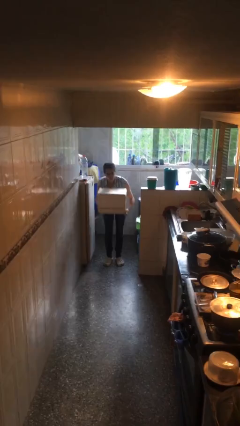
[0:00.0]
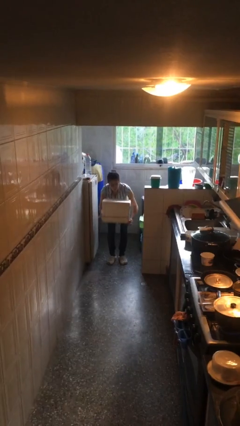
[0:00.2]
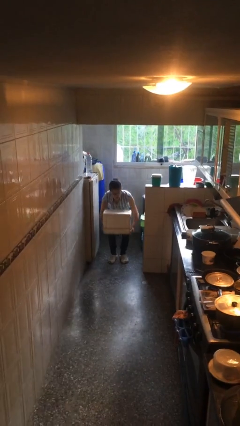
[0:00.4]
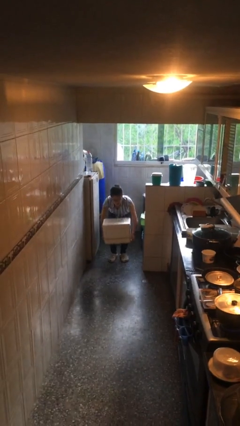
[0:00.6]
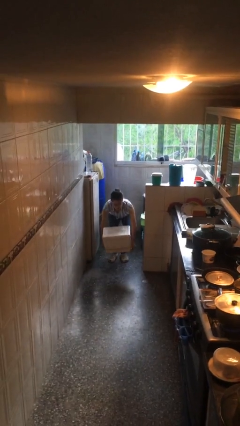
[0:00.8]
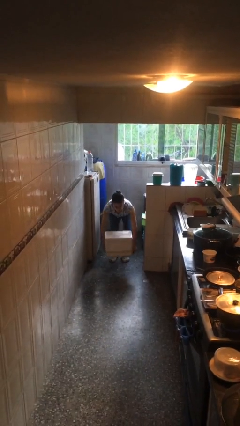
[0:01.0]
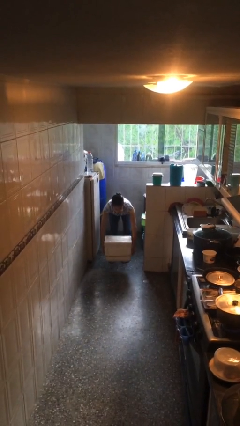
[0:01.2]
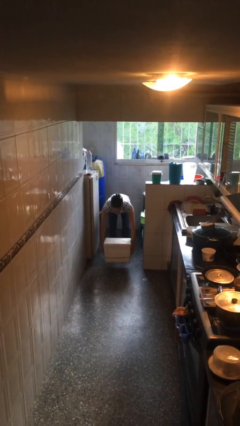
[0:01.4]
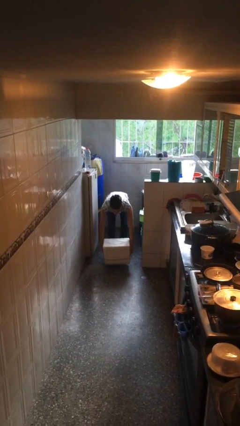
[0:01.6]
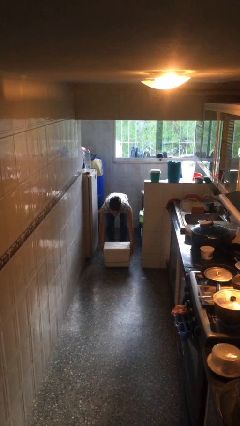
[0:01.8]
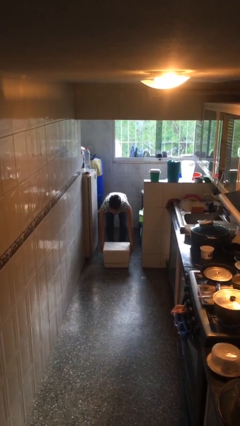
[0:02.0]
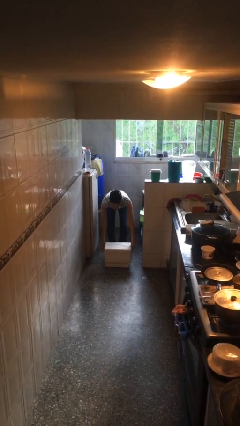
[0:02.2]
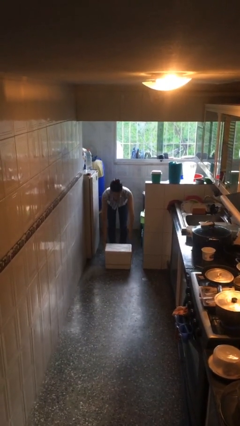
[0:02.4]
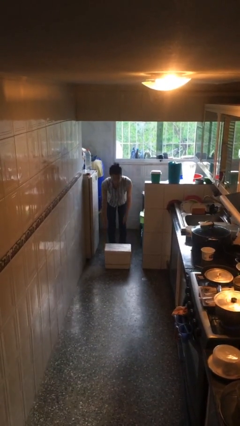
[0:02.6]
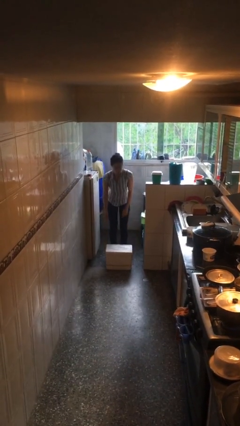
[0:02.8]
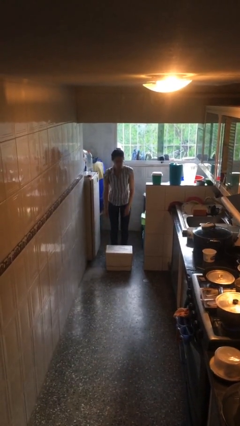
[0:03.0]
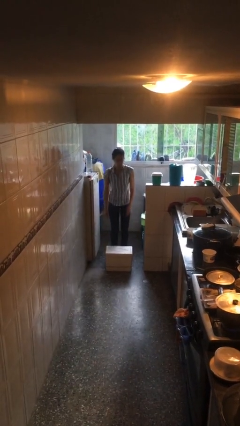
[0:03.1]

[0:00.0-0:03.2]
person puts down object on floor

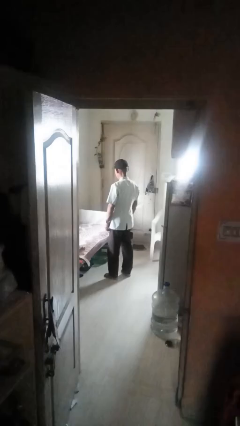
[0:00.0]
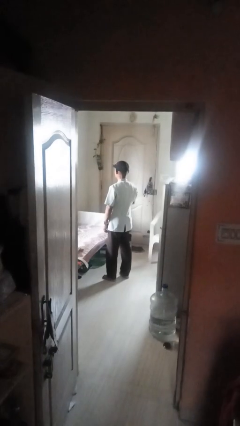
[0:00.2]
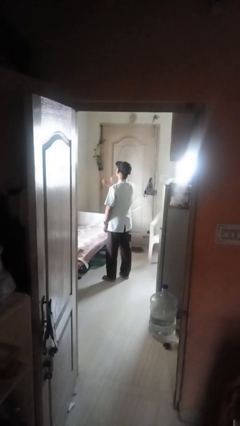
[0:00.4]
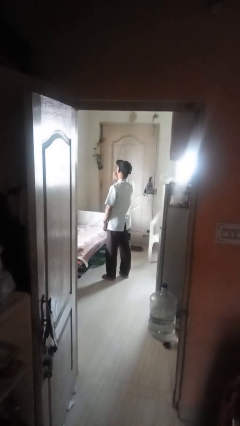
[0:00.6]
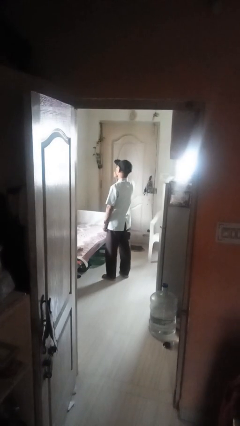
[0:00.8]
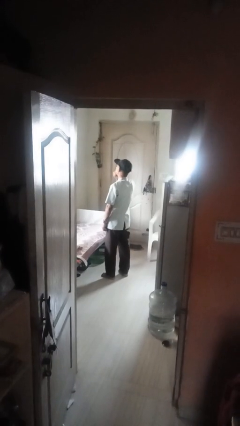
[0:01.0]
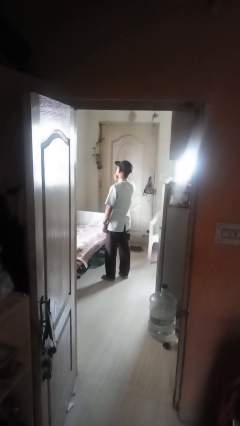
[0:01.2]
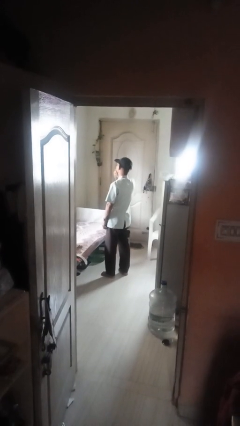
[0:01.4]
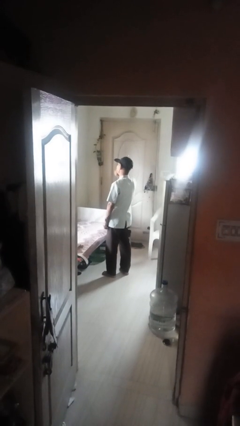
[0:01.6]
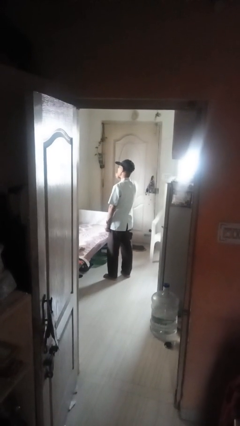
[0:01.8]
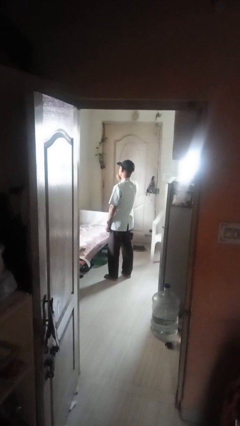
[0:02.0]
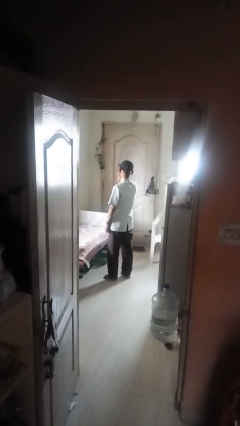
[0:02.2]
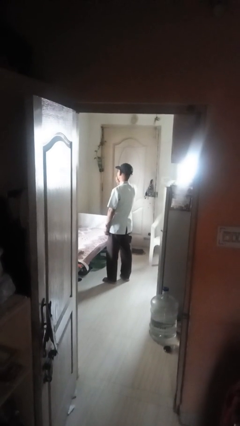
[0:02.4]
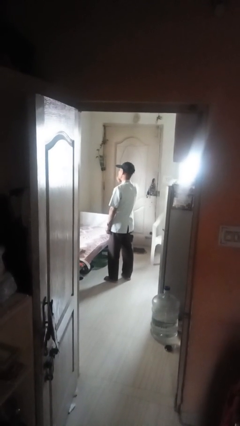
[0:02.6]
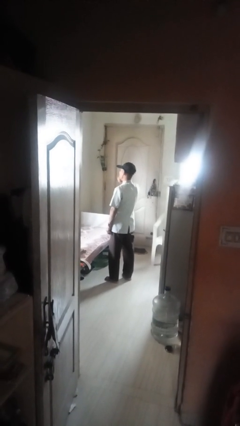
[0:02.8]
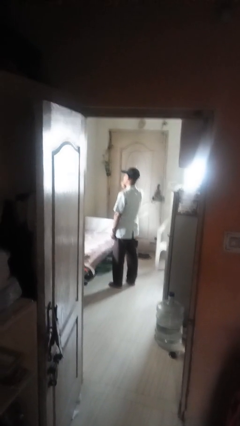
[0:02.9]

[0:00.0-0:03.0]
person strokes chin

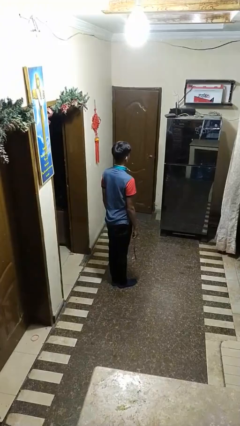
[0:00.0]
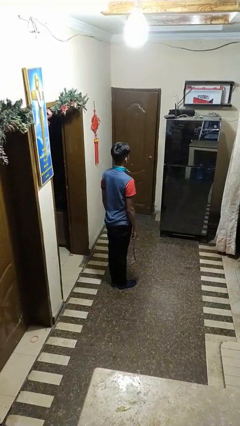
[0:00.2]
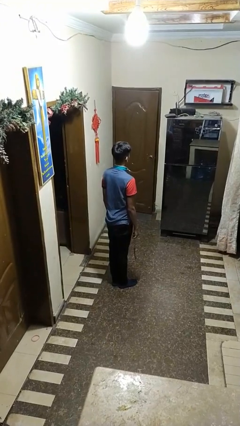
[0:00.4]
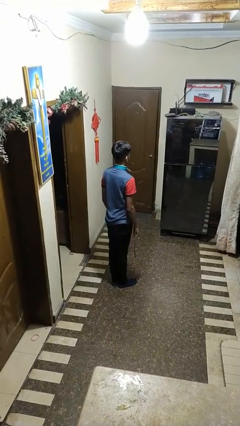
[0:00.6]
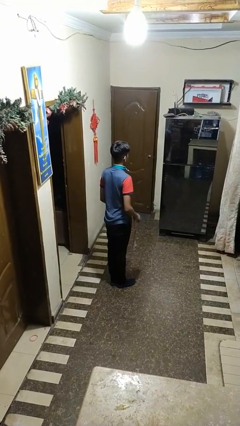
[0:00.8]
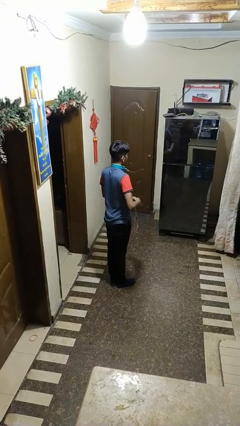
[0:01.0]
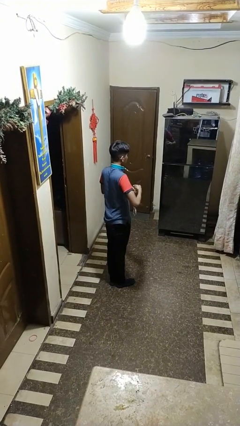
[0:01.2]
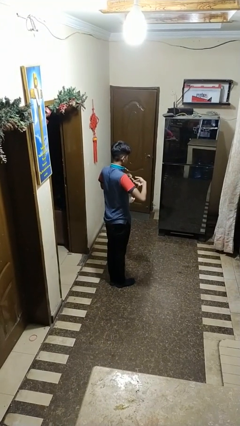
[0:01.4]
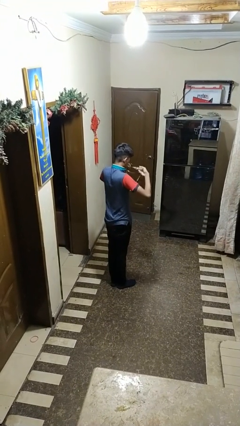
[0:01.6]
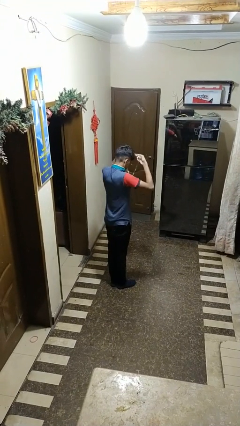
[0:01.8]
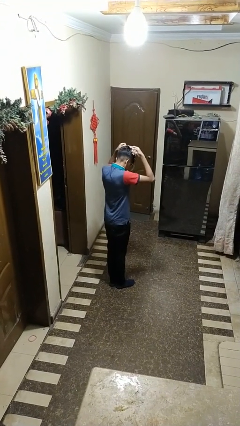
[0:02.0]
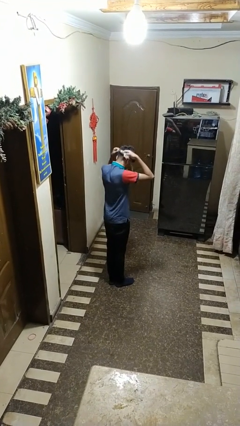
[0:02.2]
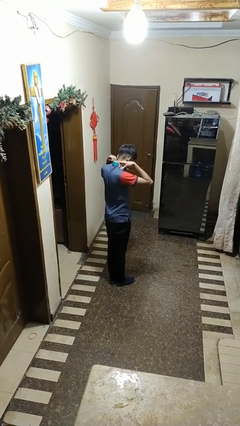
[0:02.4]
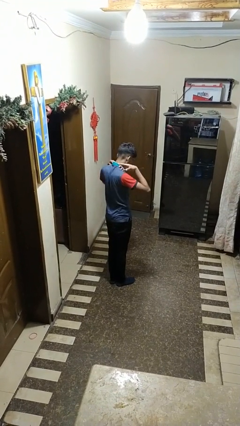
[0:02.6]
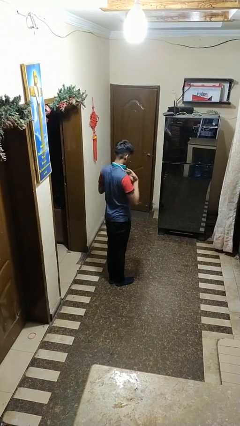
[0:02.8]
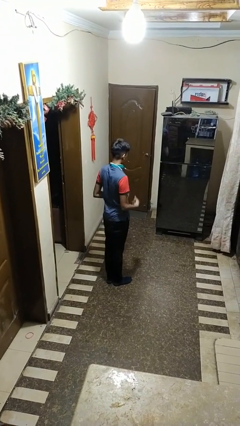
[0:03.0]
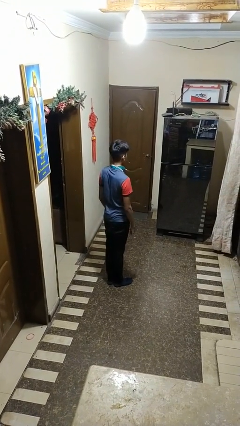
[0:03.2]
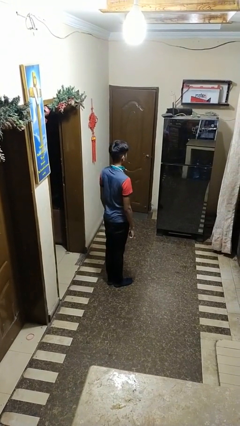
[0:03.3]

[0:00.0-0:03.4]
person puts on necklace

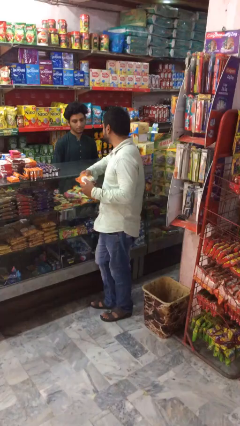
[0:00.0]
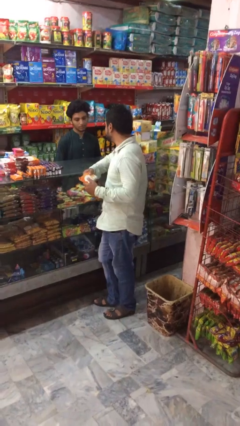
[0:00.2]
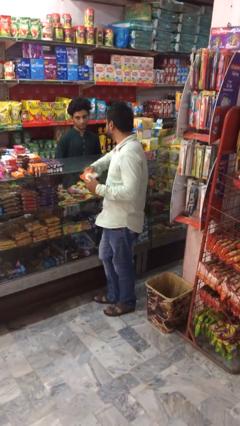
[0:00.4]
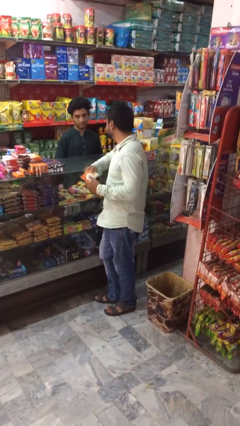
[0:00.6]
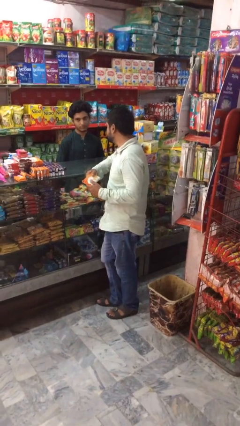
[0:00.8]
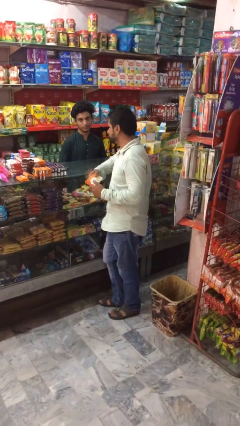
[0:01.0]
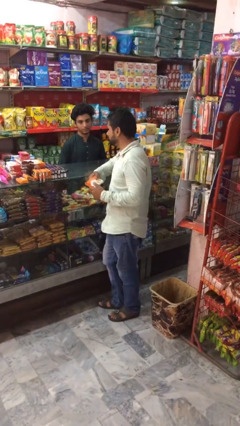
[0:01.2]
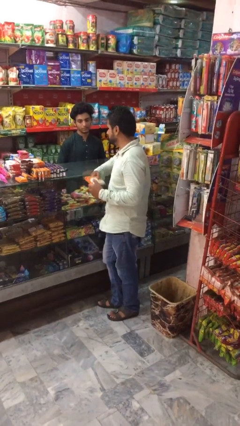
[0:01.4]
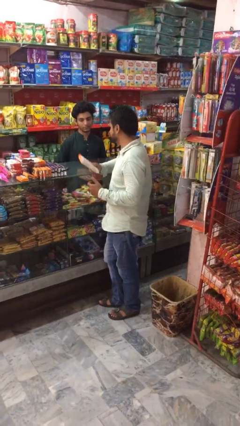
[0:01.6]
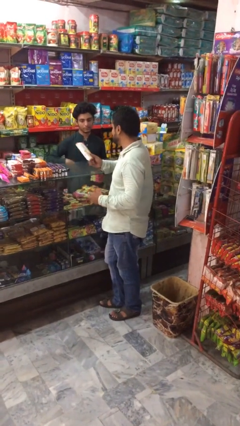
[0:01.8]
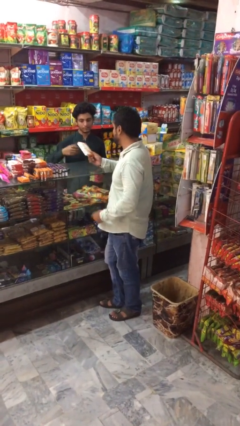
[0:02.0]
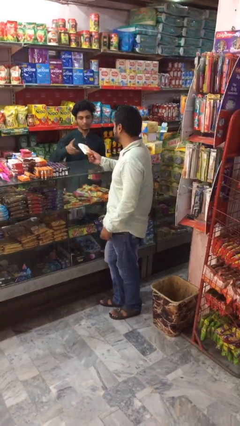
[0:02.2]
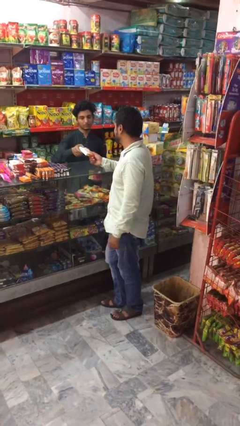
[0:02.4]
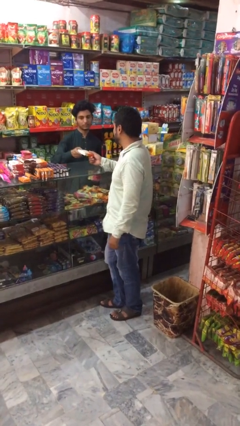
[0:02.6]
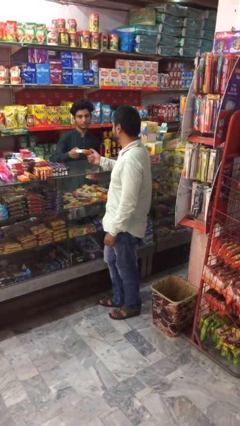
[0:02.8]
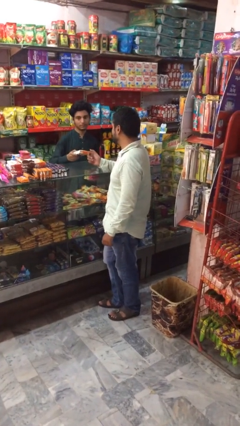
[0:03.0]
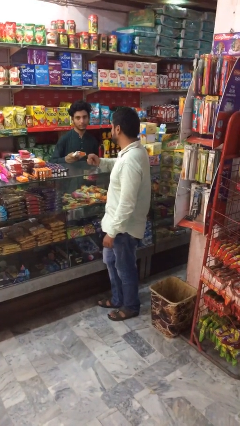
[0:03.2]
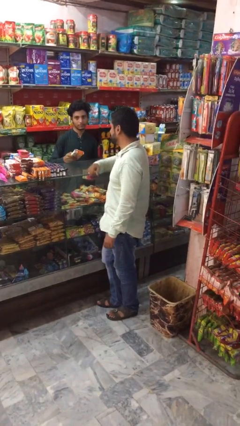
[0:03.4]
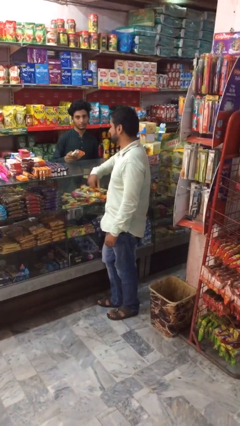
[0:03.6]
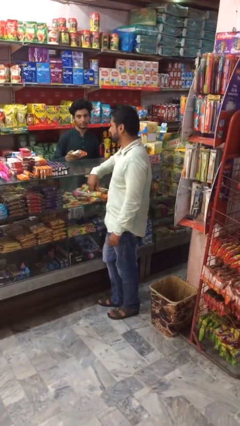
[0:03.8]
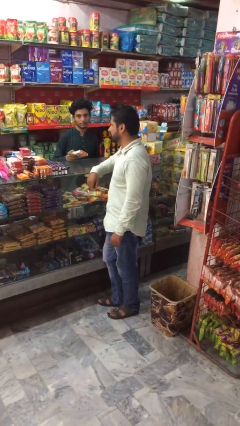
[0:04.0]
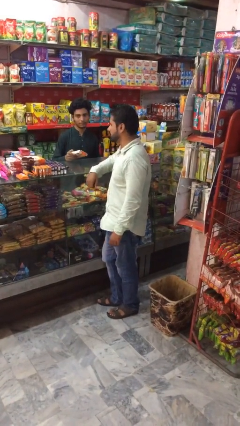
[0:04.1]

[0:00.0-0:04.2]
person transfers object to person

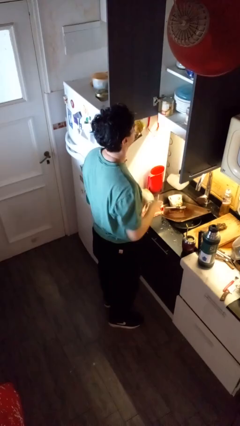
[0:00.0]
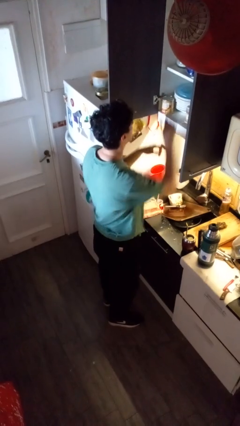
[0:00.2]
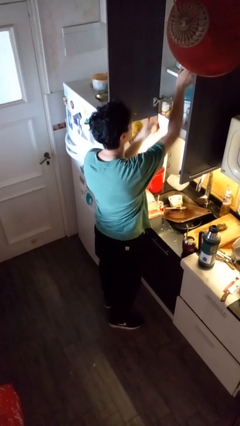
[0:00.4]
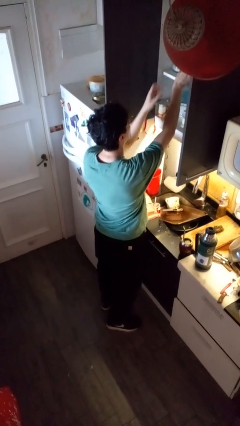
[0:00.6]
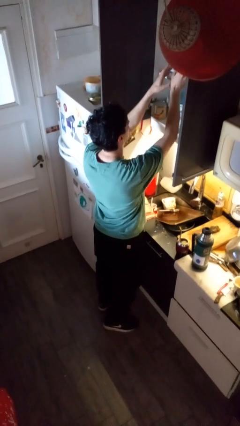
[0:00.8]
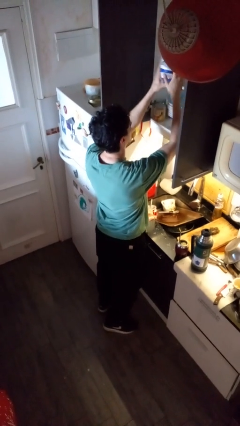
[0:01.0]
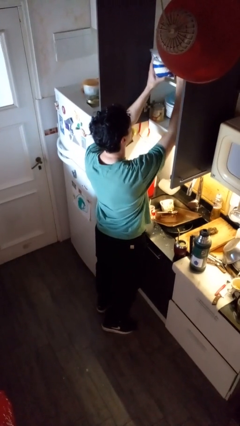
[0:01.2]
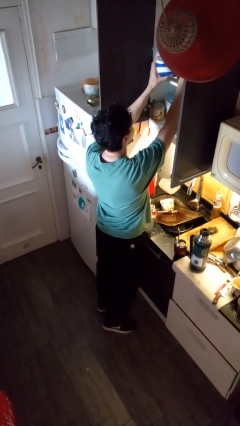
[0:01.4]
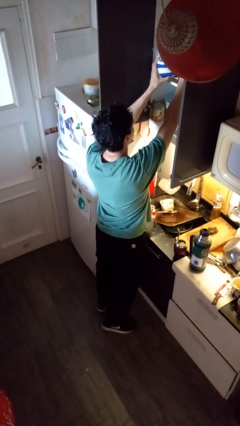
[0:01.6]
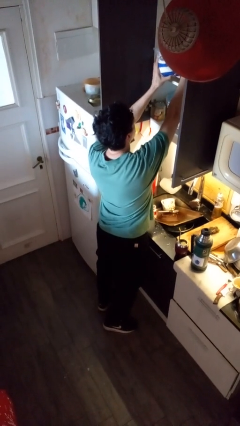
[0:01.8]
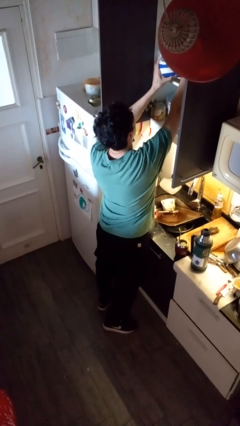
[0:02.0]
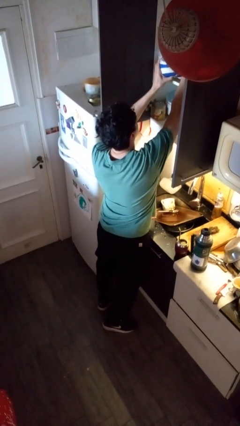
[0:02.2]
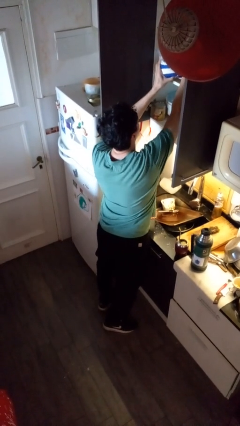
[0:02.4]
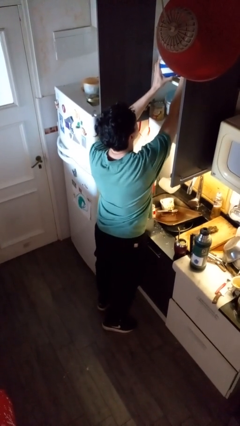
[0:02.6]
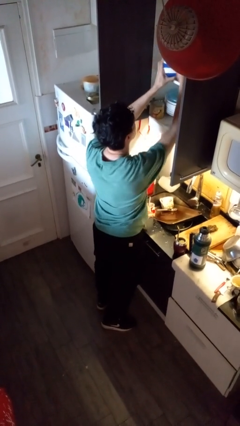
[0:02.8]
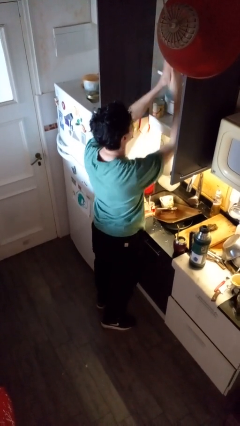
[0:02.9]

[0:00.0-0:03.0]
person searches in kitchen drawer

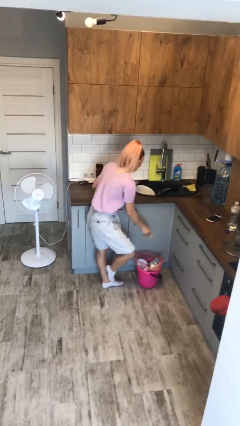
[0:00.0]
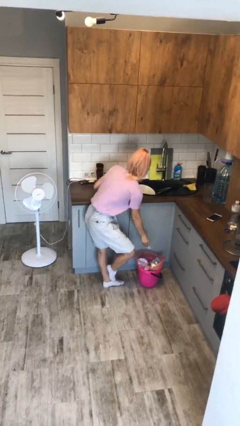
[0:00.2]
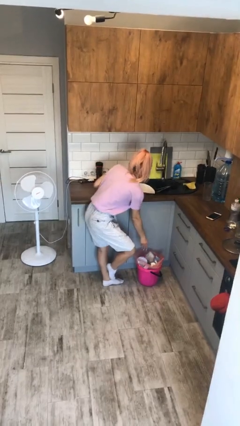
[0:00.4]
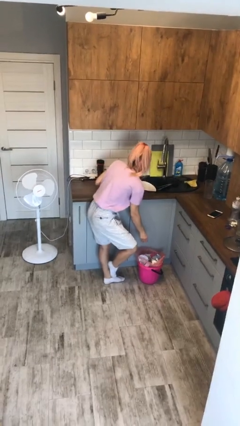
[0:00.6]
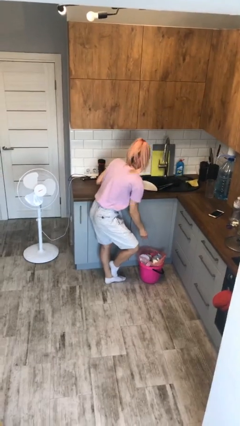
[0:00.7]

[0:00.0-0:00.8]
person discards trash
